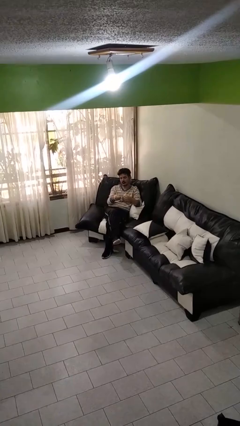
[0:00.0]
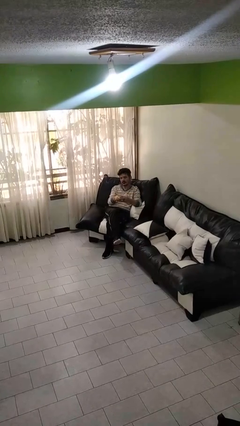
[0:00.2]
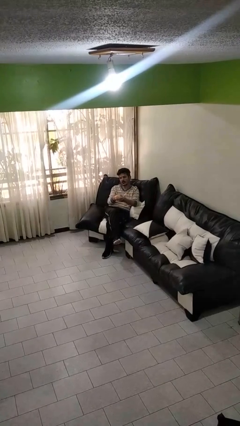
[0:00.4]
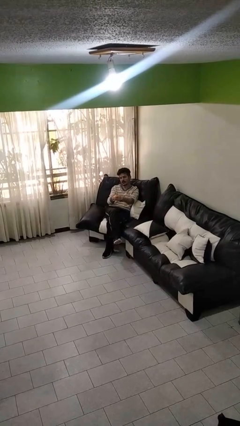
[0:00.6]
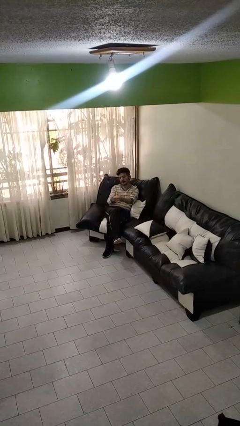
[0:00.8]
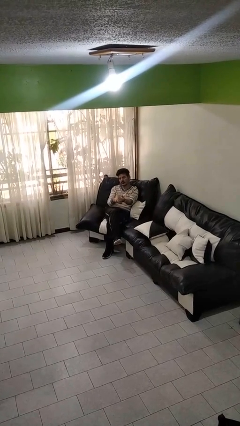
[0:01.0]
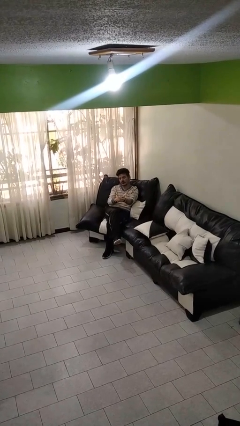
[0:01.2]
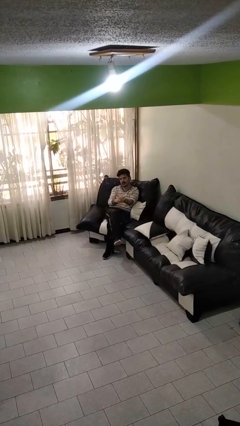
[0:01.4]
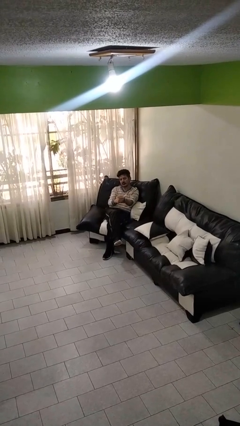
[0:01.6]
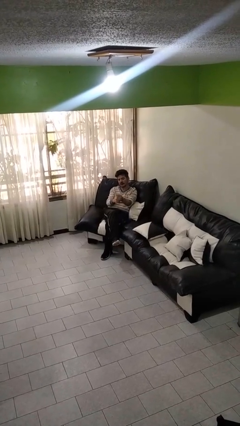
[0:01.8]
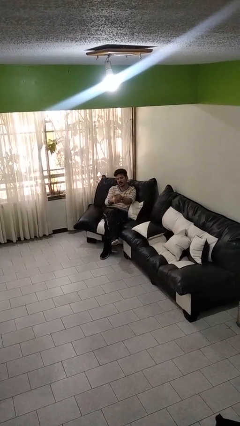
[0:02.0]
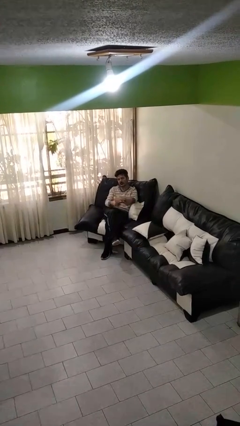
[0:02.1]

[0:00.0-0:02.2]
person puts on wristwatch

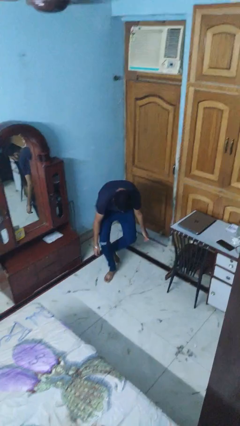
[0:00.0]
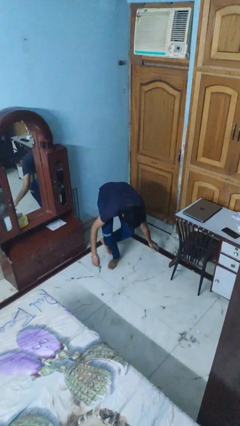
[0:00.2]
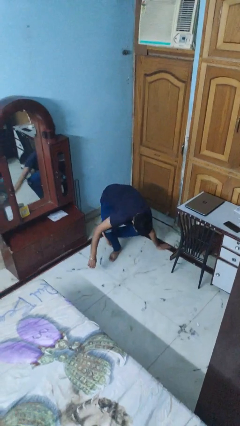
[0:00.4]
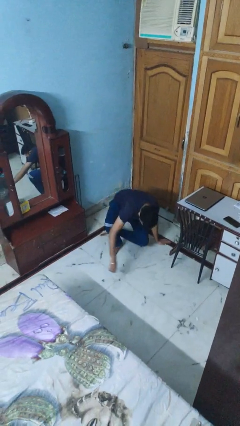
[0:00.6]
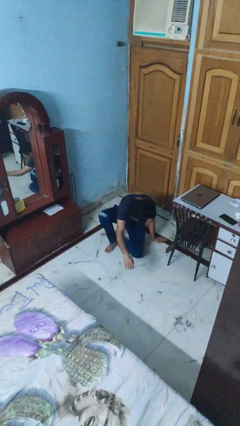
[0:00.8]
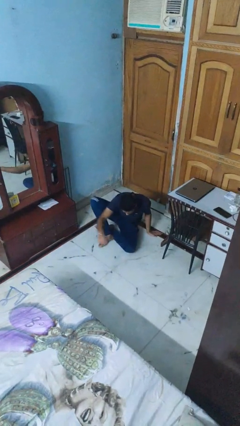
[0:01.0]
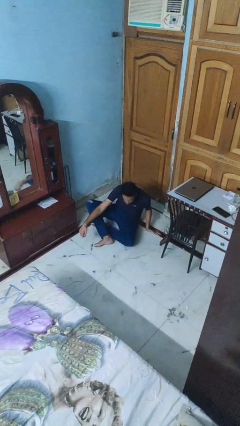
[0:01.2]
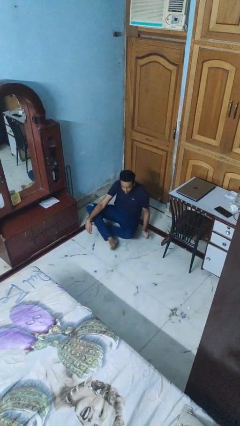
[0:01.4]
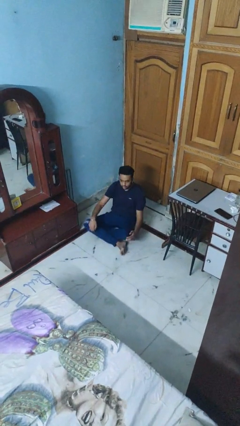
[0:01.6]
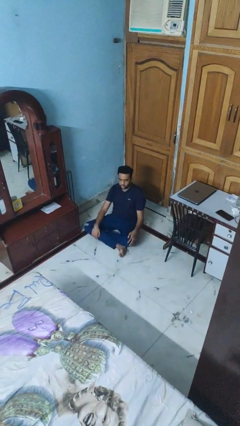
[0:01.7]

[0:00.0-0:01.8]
person sits crisscross

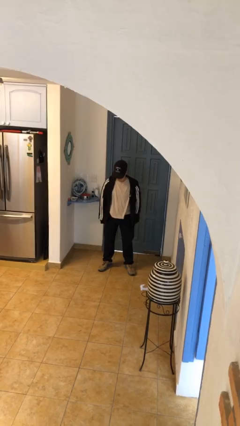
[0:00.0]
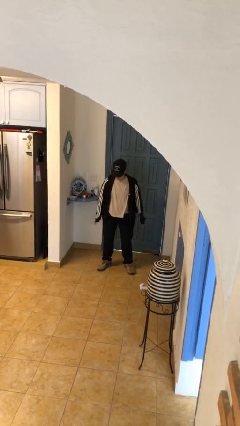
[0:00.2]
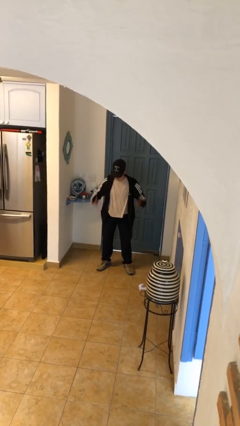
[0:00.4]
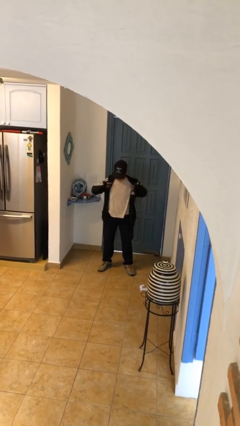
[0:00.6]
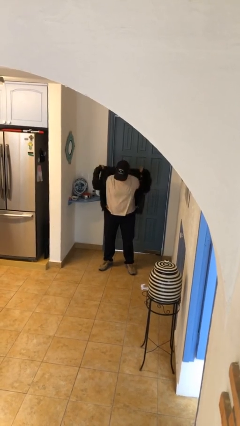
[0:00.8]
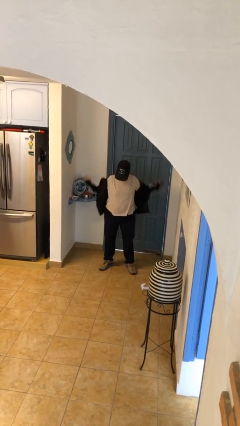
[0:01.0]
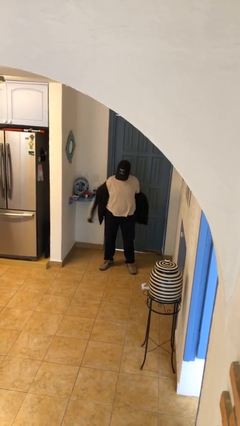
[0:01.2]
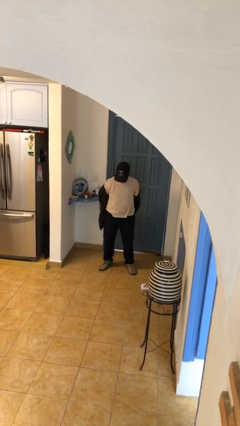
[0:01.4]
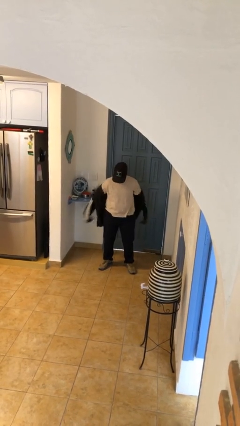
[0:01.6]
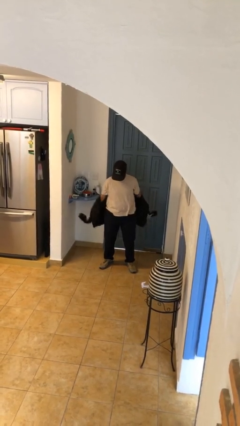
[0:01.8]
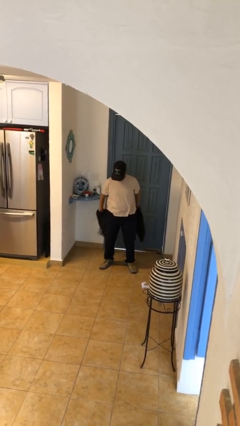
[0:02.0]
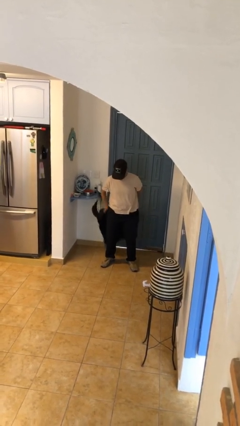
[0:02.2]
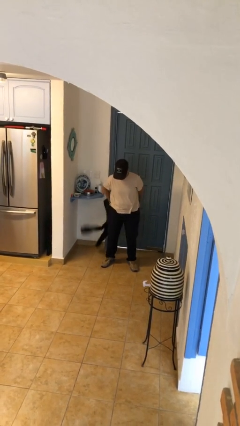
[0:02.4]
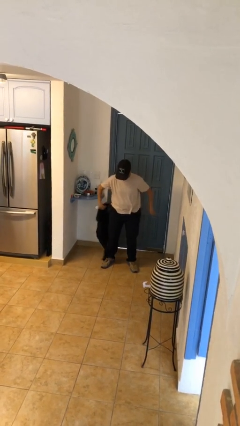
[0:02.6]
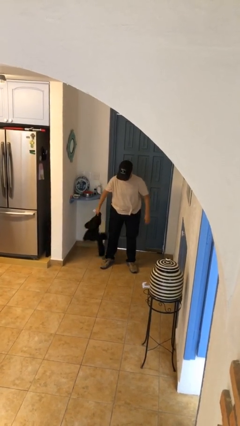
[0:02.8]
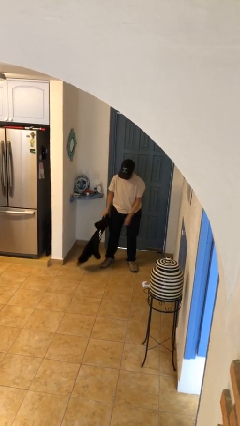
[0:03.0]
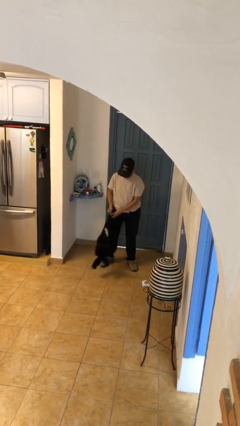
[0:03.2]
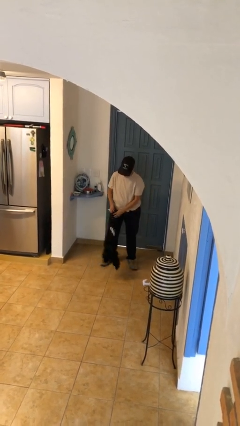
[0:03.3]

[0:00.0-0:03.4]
person takes off jacket

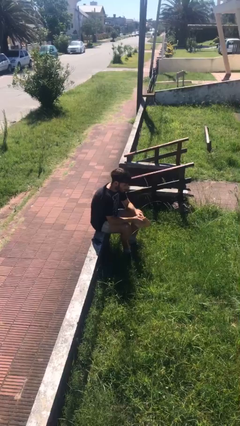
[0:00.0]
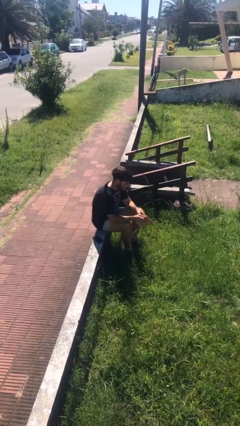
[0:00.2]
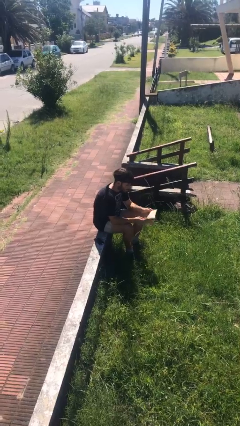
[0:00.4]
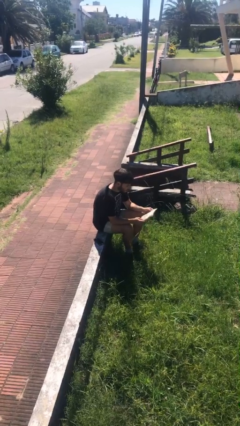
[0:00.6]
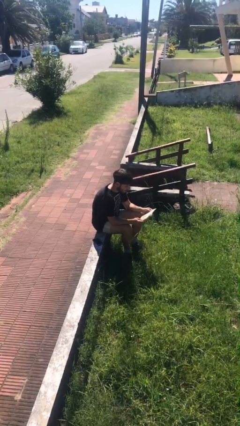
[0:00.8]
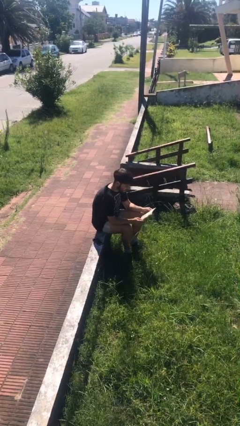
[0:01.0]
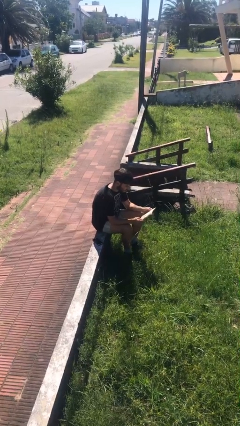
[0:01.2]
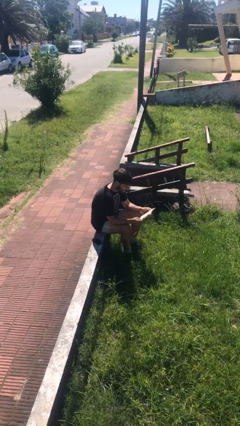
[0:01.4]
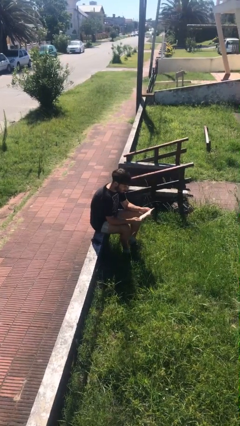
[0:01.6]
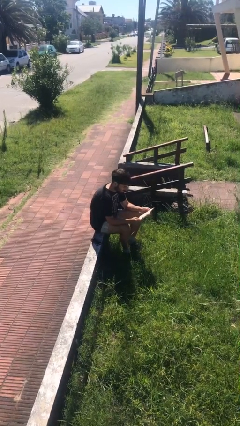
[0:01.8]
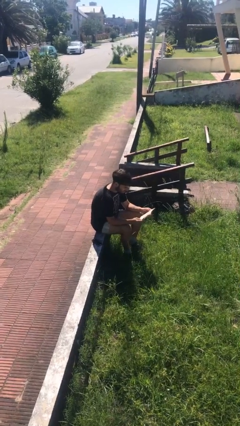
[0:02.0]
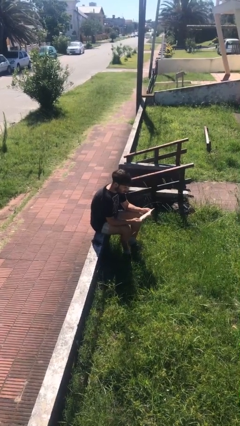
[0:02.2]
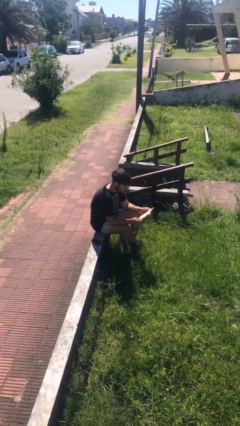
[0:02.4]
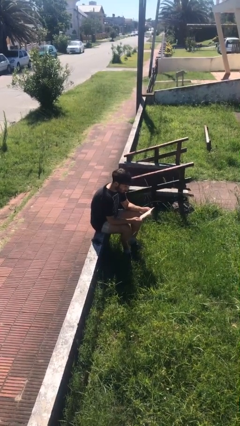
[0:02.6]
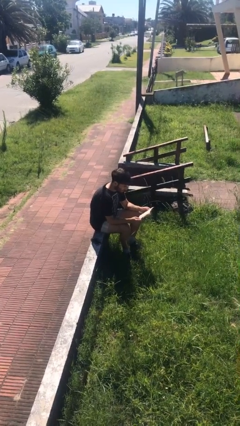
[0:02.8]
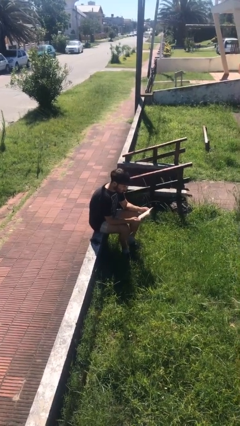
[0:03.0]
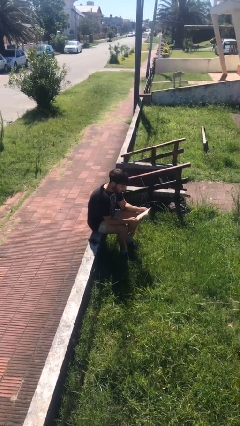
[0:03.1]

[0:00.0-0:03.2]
person reads document

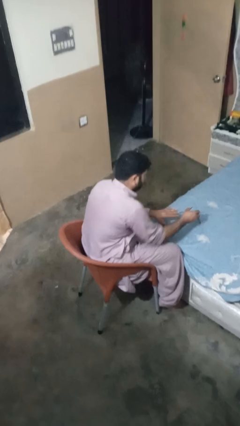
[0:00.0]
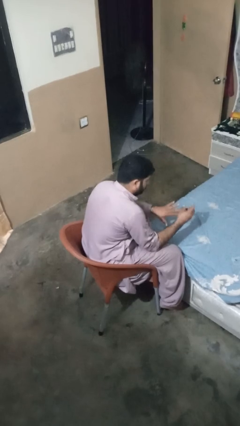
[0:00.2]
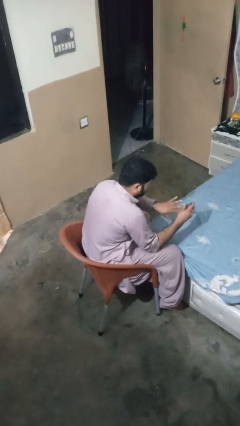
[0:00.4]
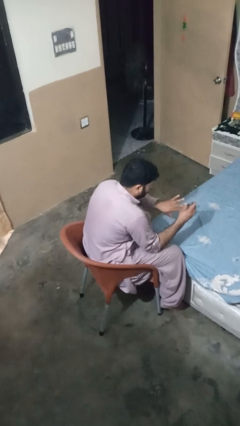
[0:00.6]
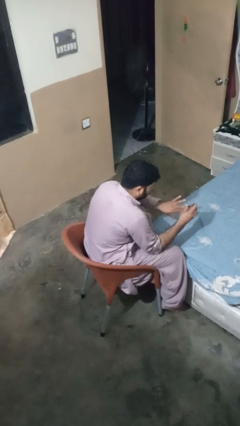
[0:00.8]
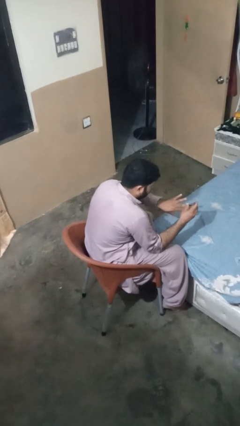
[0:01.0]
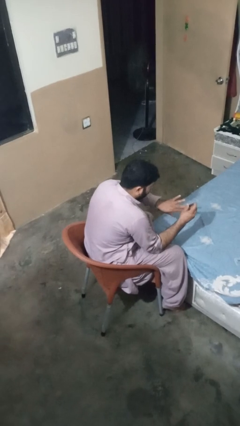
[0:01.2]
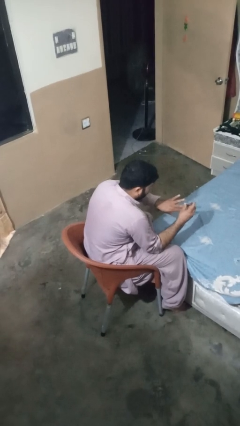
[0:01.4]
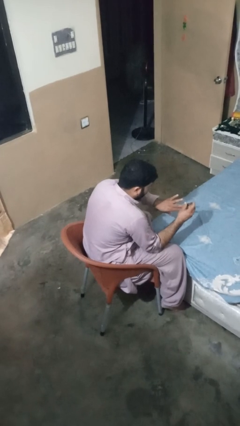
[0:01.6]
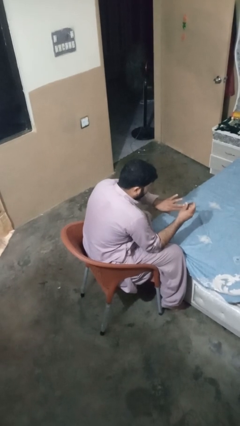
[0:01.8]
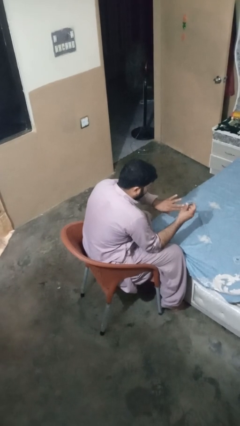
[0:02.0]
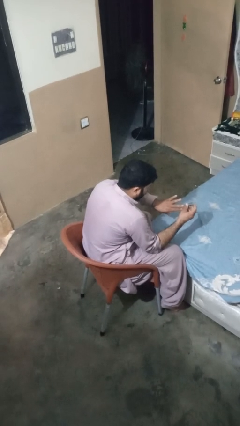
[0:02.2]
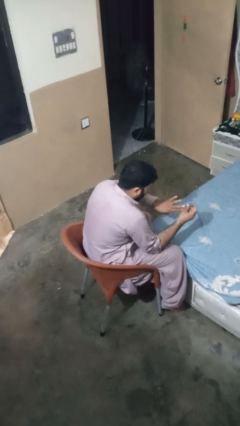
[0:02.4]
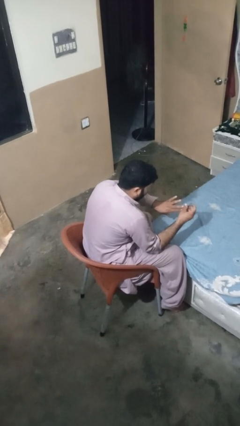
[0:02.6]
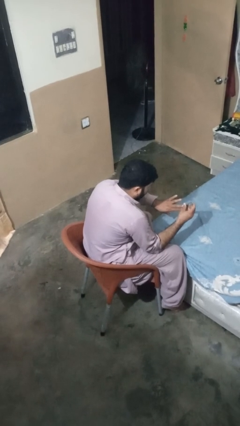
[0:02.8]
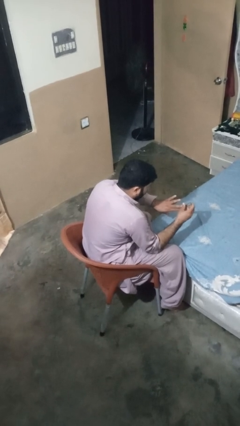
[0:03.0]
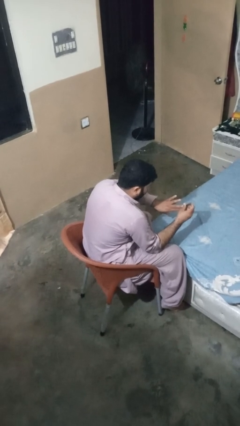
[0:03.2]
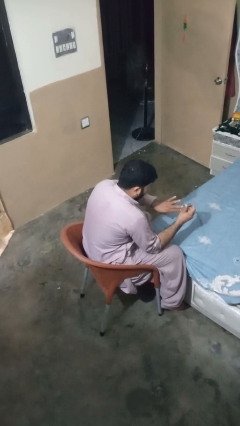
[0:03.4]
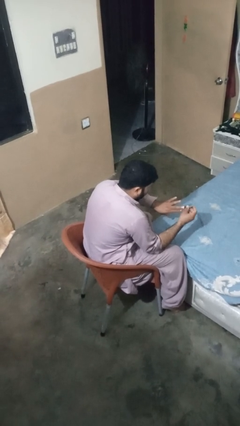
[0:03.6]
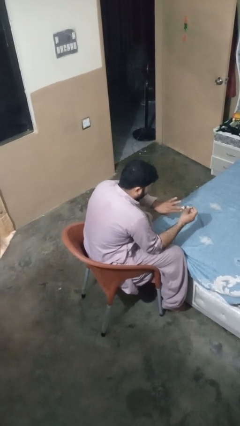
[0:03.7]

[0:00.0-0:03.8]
person clips fingernails

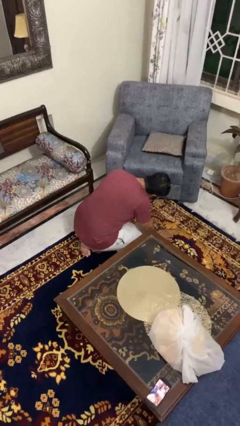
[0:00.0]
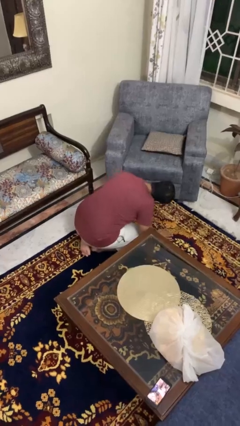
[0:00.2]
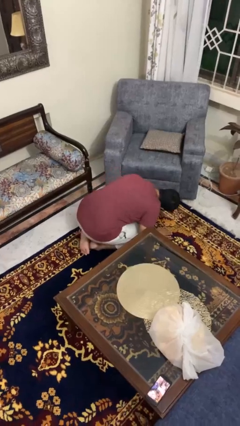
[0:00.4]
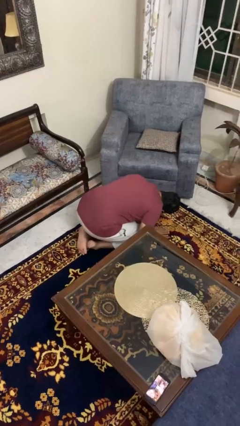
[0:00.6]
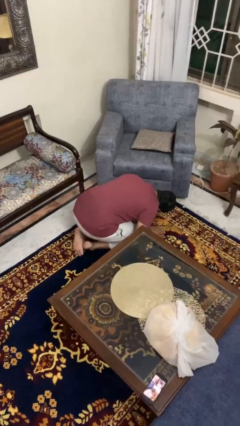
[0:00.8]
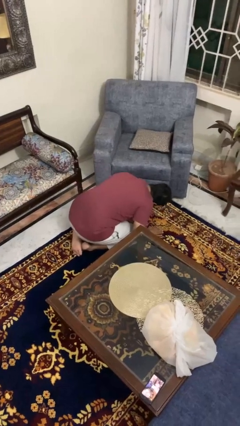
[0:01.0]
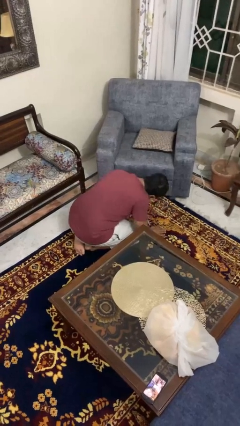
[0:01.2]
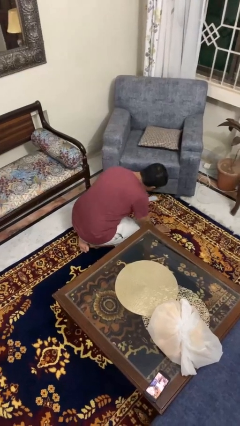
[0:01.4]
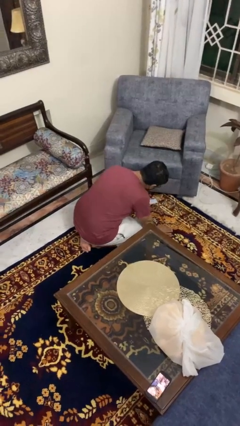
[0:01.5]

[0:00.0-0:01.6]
person searches under couch

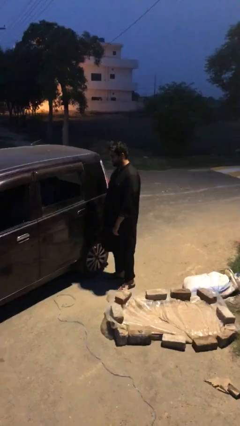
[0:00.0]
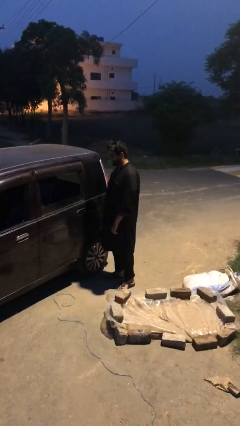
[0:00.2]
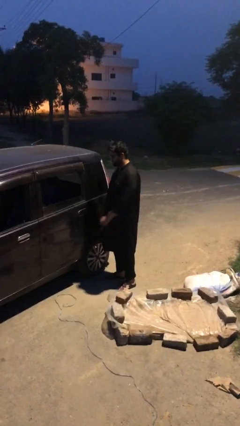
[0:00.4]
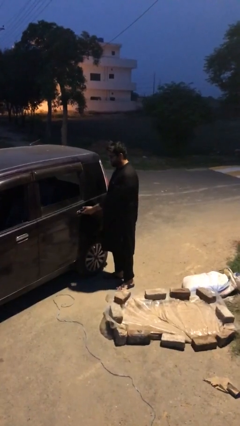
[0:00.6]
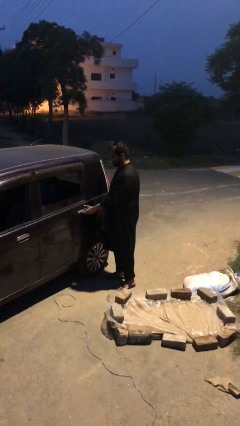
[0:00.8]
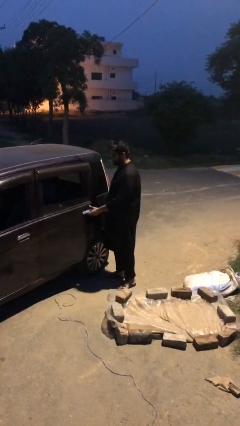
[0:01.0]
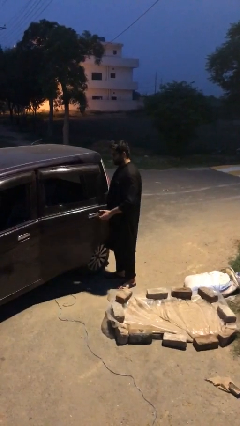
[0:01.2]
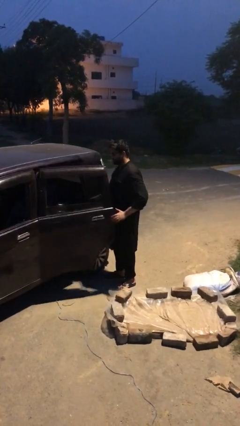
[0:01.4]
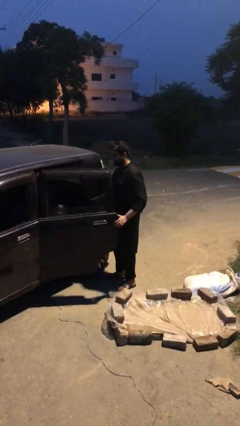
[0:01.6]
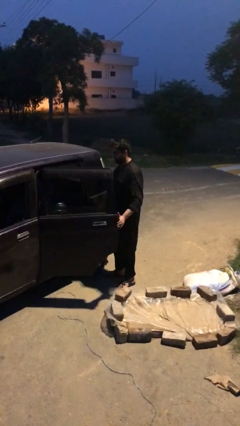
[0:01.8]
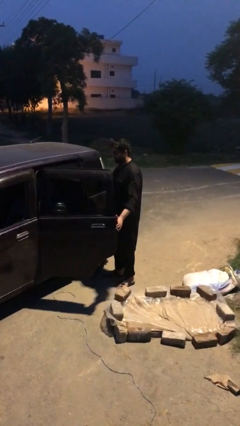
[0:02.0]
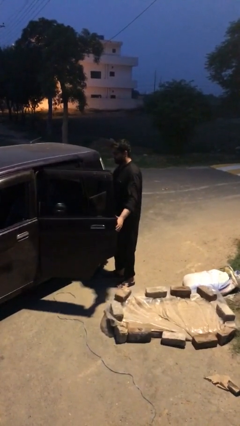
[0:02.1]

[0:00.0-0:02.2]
person opens car door
